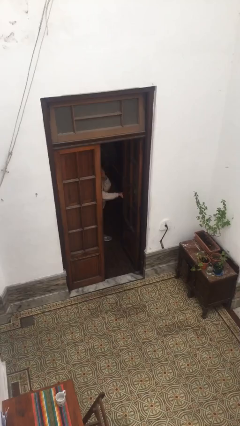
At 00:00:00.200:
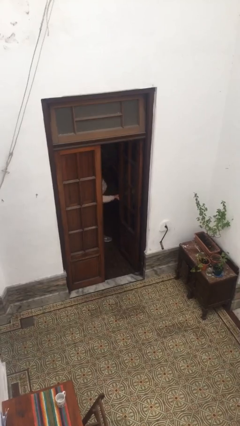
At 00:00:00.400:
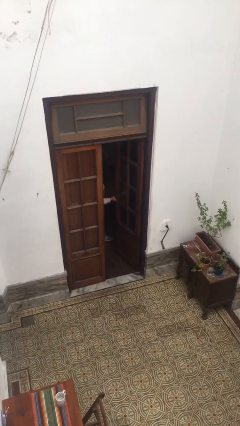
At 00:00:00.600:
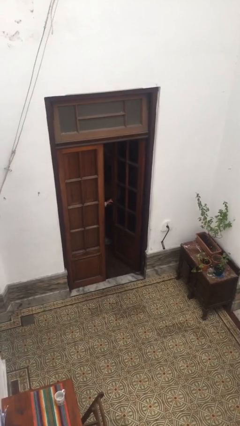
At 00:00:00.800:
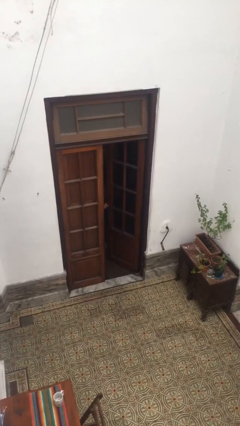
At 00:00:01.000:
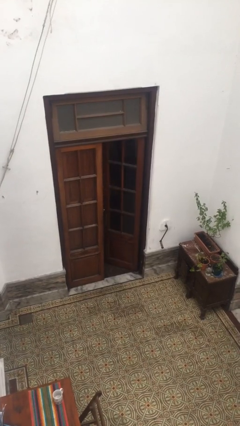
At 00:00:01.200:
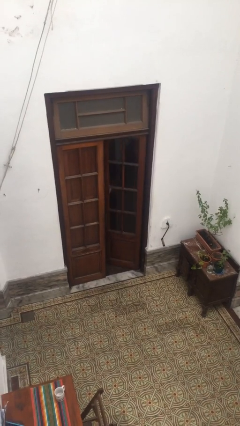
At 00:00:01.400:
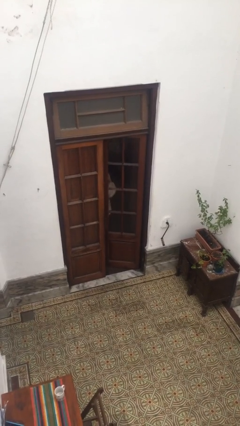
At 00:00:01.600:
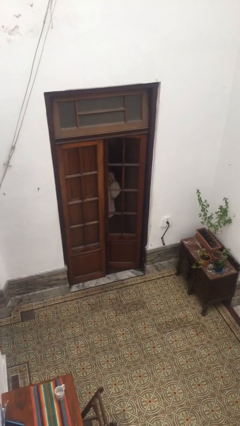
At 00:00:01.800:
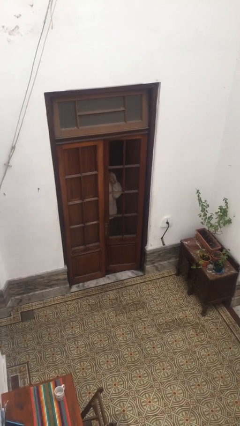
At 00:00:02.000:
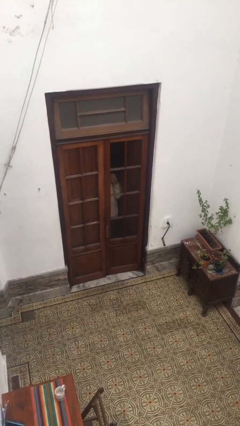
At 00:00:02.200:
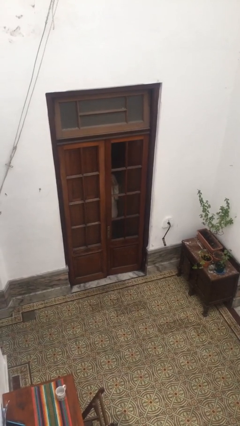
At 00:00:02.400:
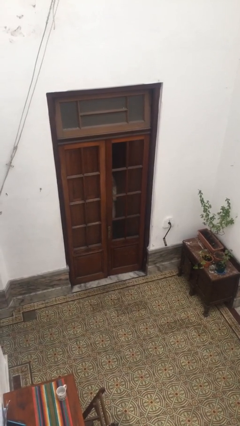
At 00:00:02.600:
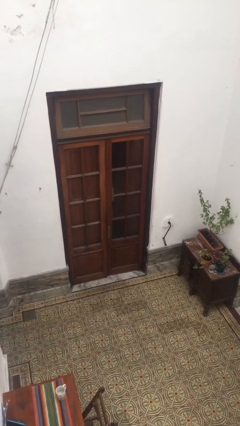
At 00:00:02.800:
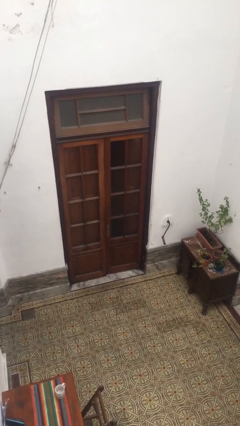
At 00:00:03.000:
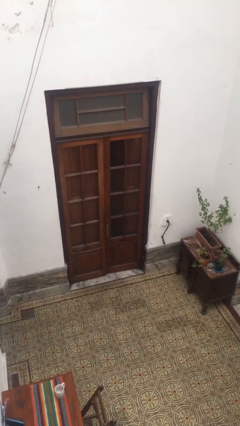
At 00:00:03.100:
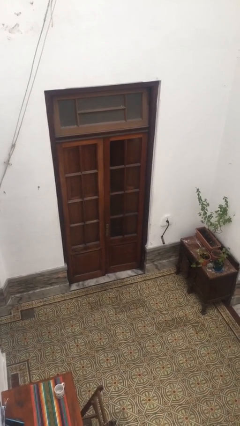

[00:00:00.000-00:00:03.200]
person closes facility door

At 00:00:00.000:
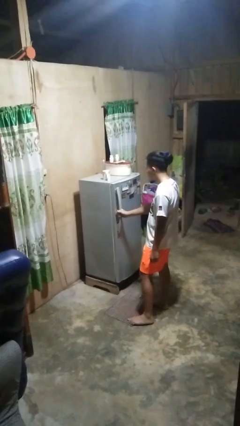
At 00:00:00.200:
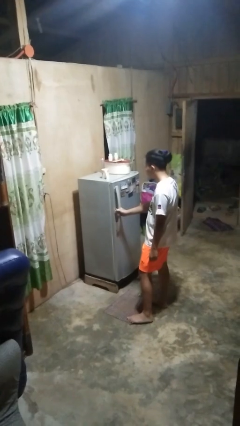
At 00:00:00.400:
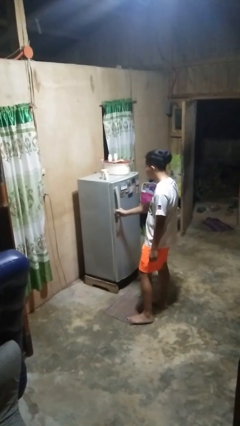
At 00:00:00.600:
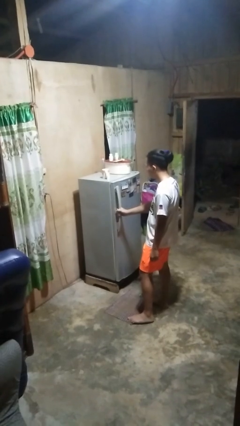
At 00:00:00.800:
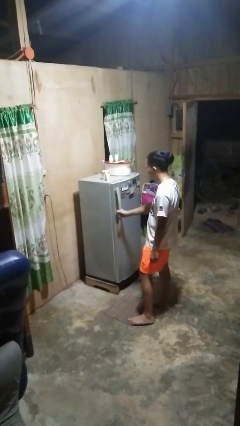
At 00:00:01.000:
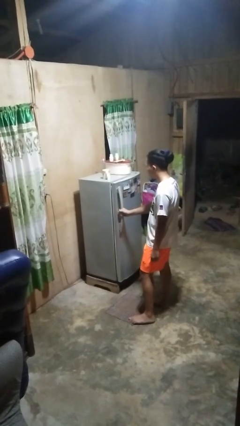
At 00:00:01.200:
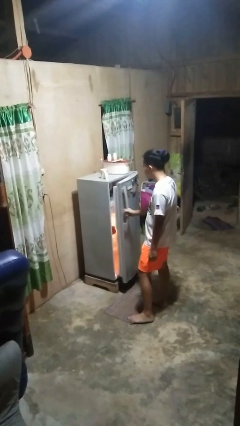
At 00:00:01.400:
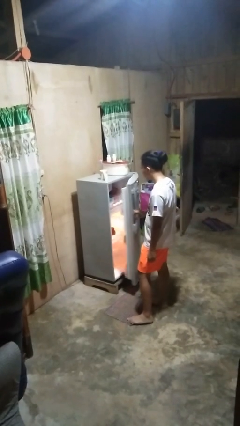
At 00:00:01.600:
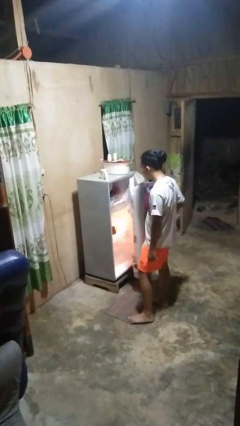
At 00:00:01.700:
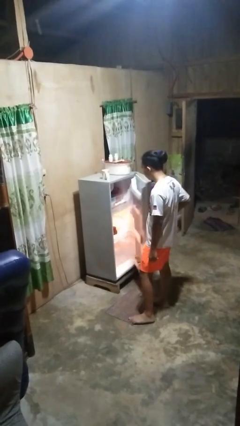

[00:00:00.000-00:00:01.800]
person opens refrigerator

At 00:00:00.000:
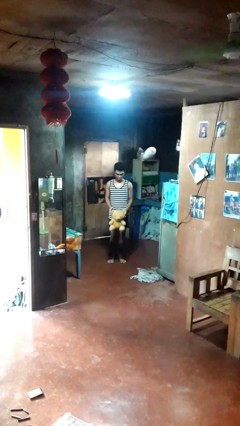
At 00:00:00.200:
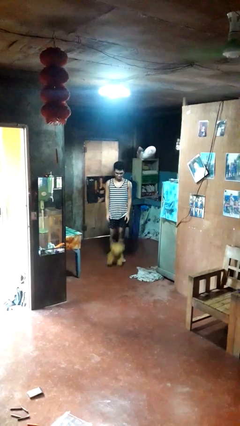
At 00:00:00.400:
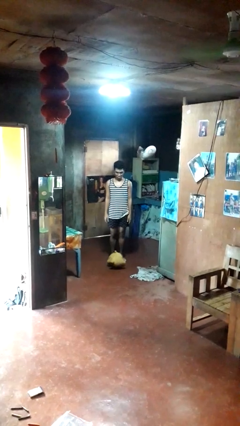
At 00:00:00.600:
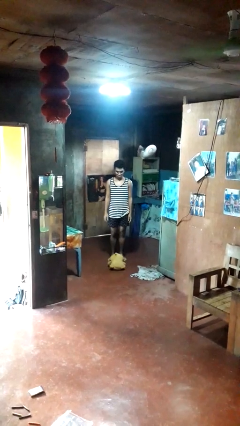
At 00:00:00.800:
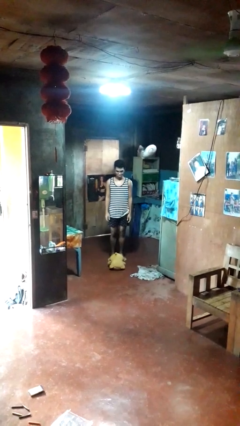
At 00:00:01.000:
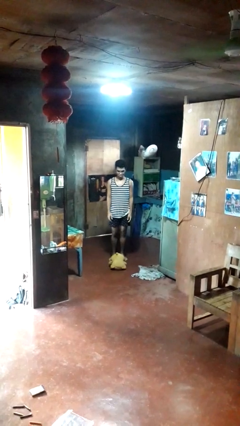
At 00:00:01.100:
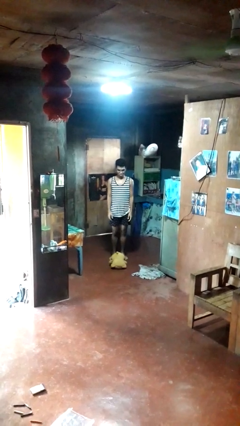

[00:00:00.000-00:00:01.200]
person drops object

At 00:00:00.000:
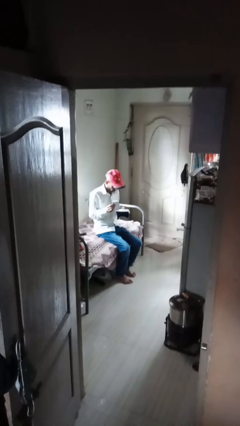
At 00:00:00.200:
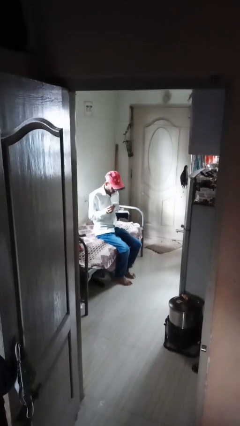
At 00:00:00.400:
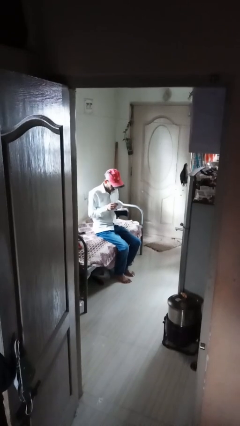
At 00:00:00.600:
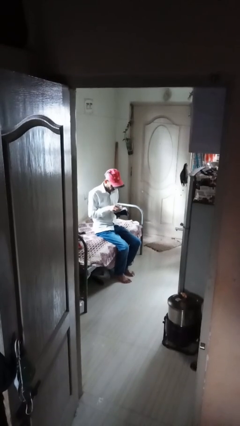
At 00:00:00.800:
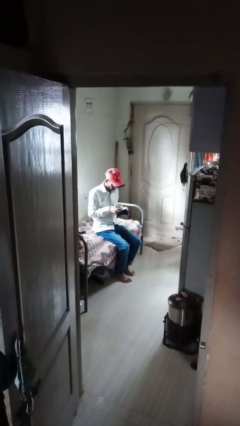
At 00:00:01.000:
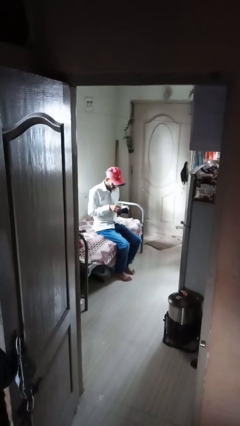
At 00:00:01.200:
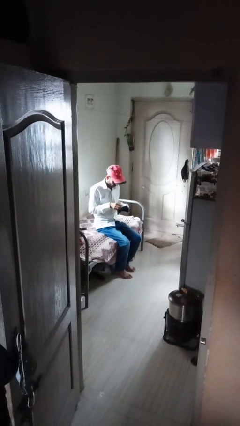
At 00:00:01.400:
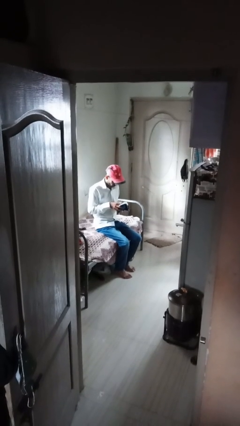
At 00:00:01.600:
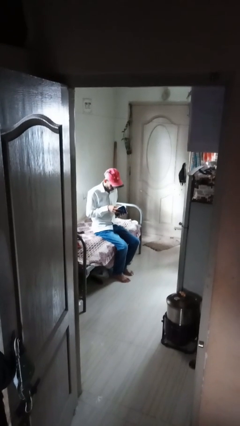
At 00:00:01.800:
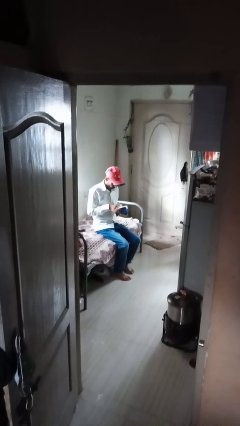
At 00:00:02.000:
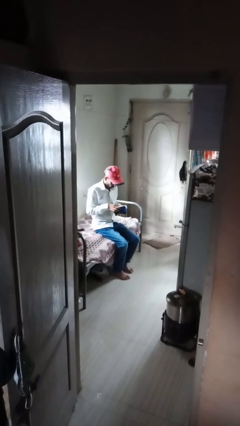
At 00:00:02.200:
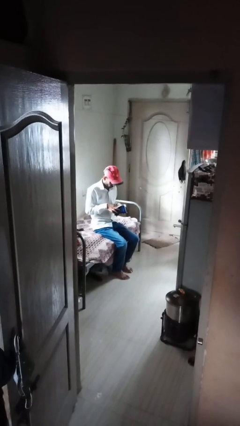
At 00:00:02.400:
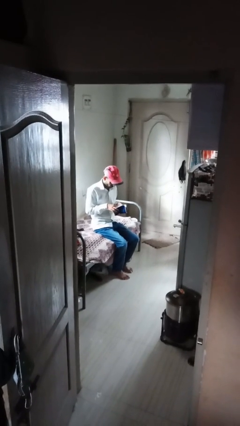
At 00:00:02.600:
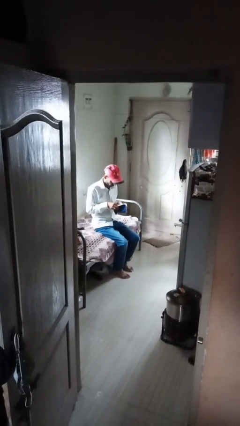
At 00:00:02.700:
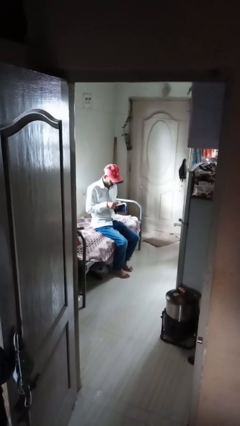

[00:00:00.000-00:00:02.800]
person puts object into purse

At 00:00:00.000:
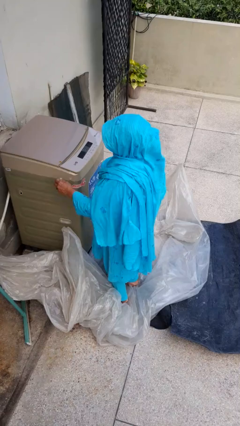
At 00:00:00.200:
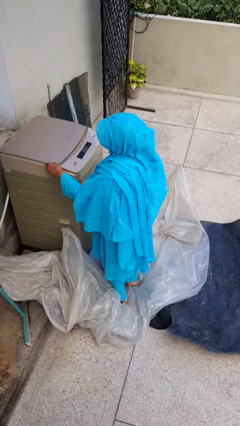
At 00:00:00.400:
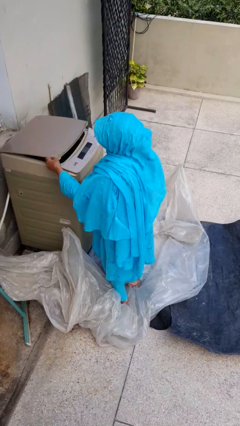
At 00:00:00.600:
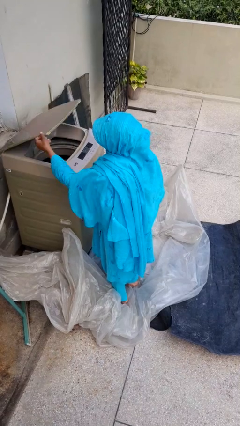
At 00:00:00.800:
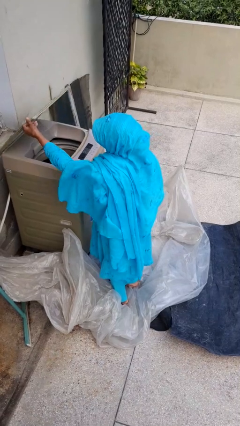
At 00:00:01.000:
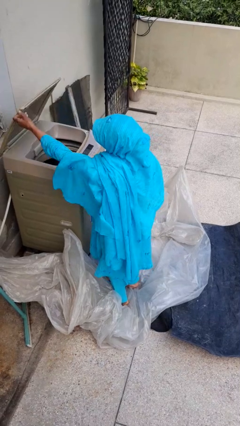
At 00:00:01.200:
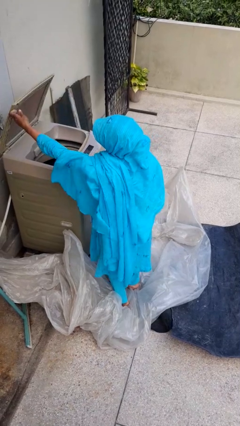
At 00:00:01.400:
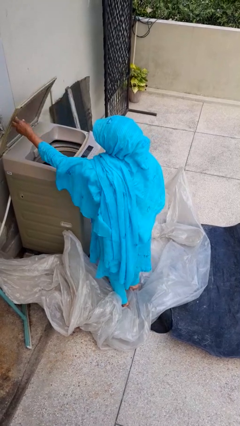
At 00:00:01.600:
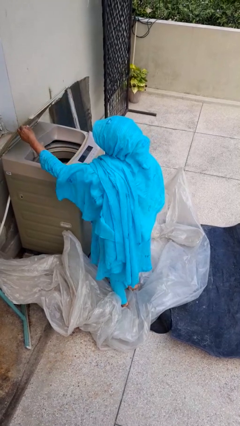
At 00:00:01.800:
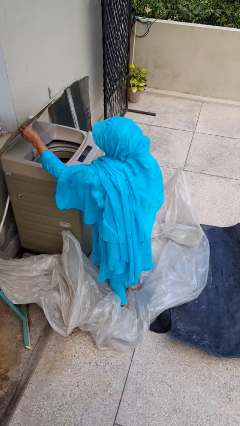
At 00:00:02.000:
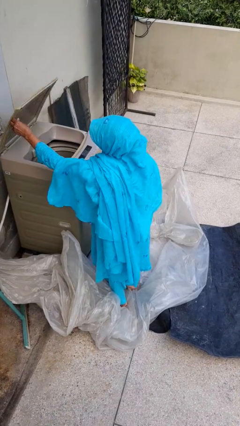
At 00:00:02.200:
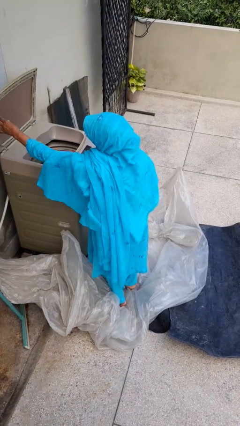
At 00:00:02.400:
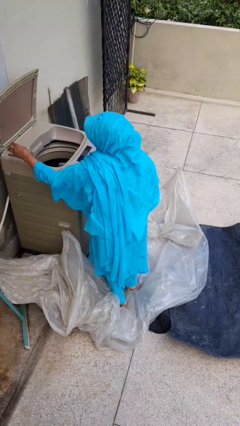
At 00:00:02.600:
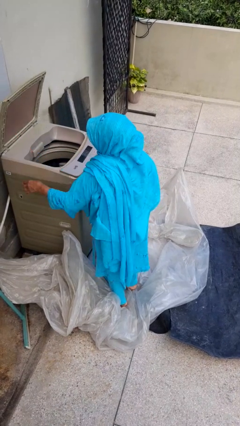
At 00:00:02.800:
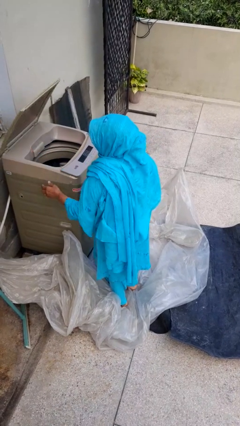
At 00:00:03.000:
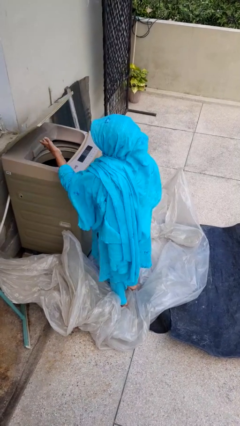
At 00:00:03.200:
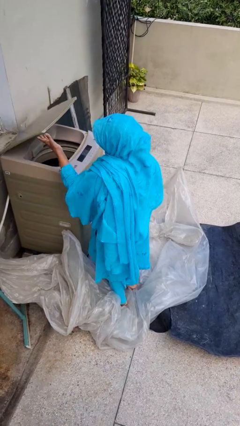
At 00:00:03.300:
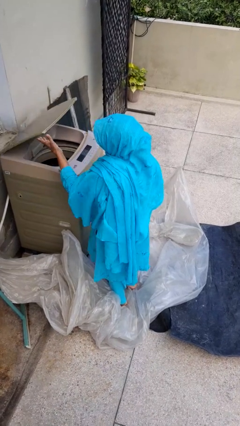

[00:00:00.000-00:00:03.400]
person opens clothes washer

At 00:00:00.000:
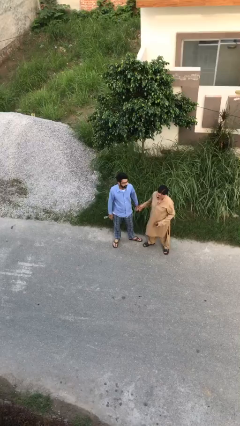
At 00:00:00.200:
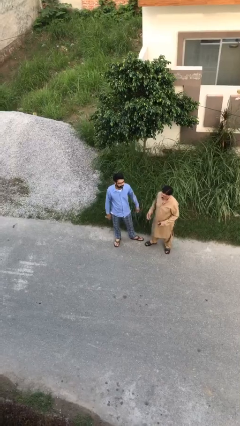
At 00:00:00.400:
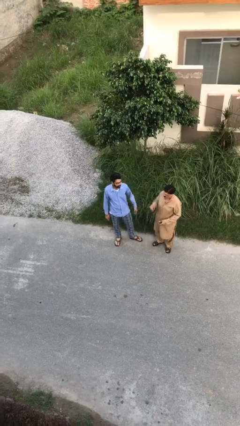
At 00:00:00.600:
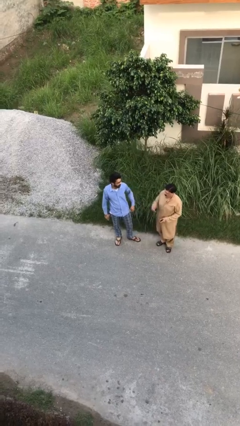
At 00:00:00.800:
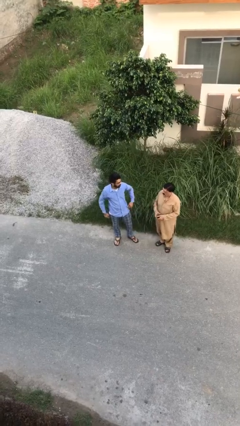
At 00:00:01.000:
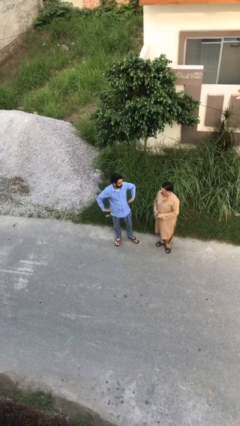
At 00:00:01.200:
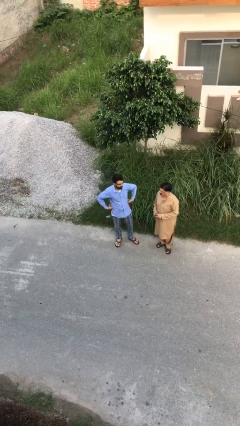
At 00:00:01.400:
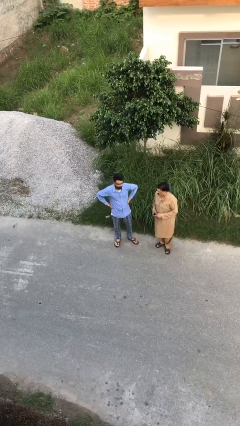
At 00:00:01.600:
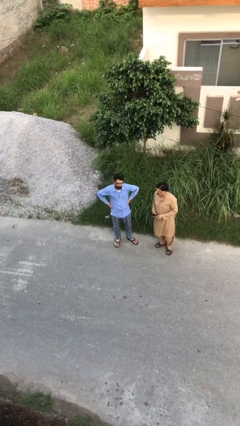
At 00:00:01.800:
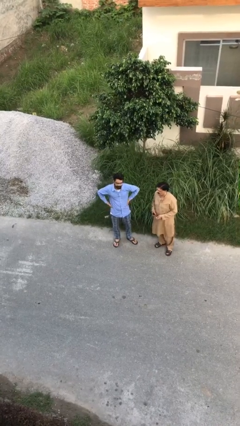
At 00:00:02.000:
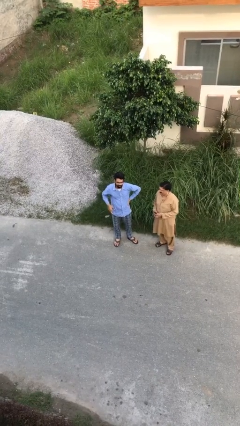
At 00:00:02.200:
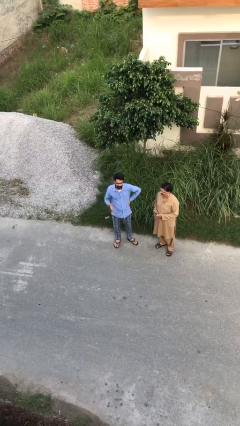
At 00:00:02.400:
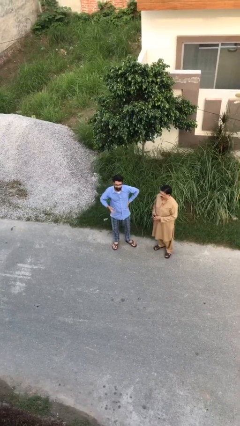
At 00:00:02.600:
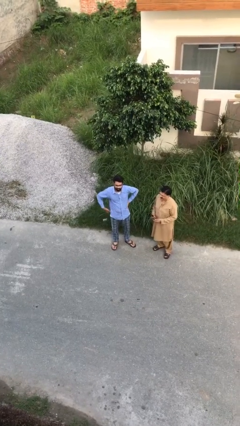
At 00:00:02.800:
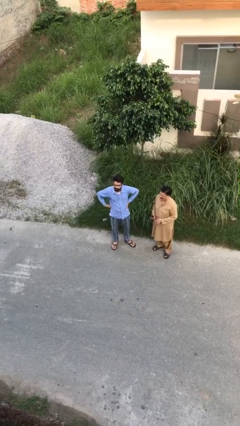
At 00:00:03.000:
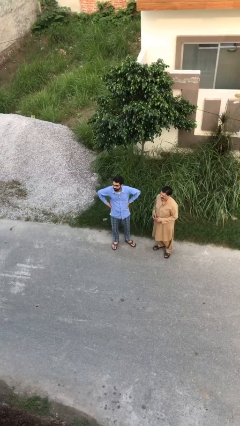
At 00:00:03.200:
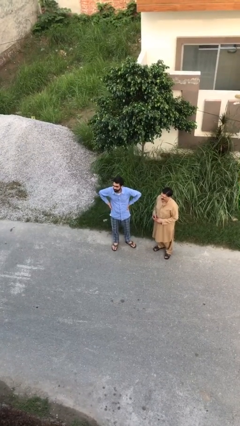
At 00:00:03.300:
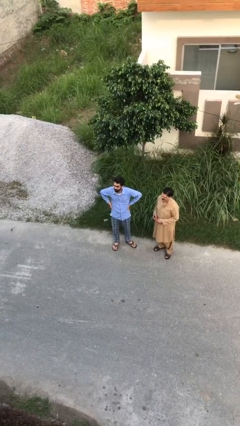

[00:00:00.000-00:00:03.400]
person talks to person

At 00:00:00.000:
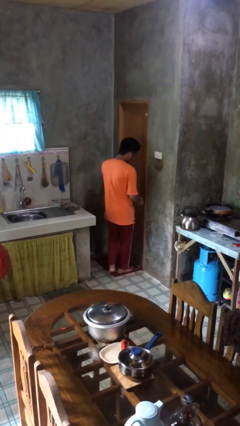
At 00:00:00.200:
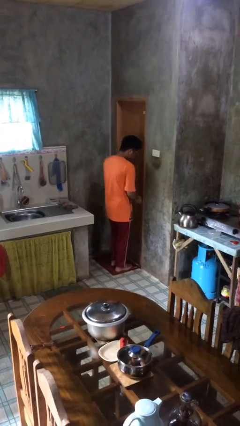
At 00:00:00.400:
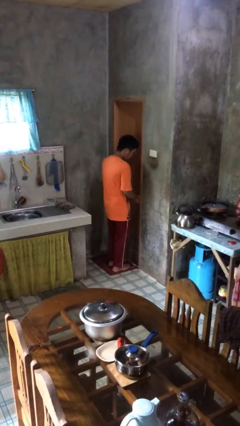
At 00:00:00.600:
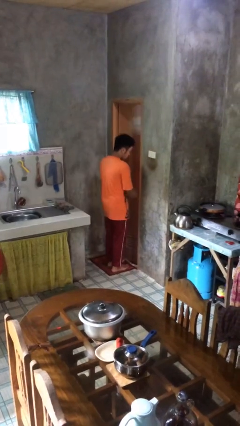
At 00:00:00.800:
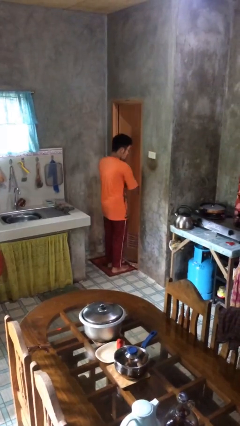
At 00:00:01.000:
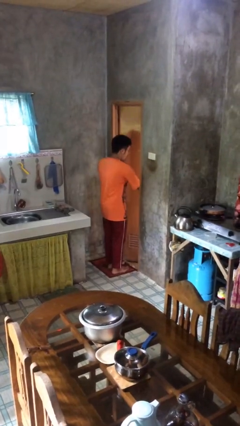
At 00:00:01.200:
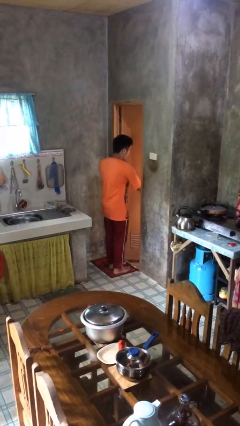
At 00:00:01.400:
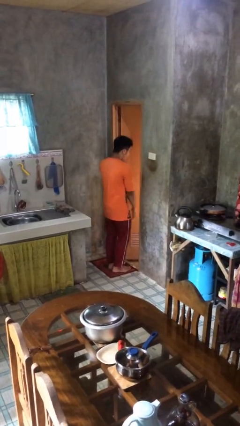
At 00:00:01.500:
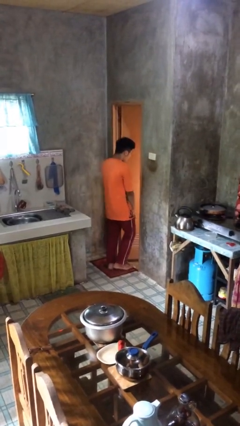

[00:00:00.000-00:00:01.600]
person opens facility door
